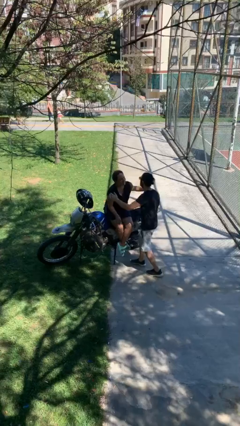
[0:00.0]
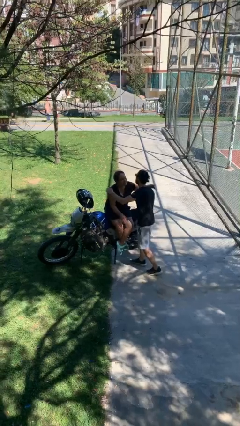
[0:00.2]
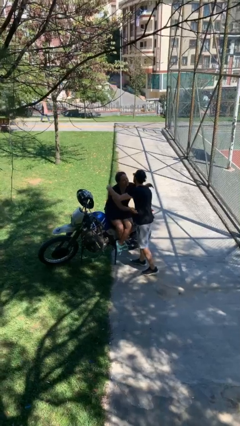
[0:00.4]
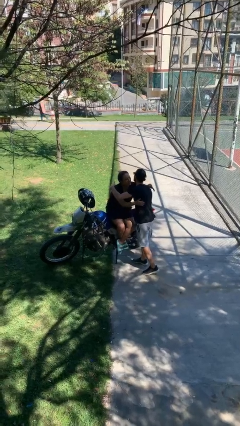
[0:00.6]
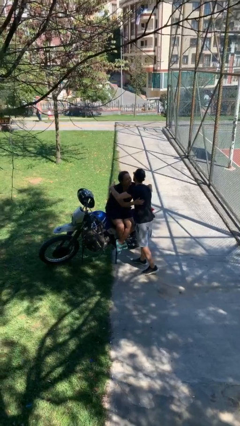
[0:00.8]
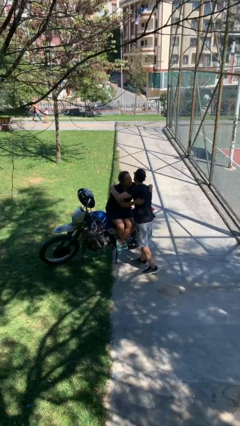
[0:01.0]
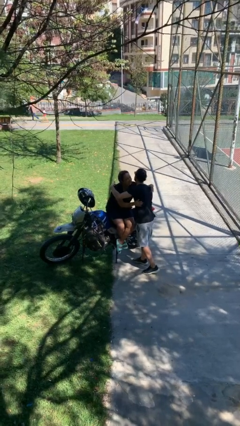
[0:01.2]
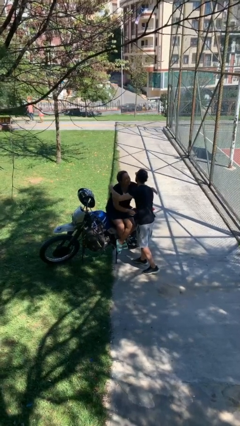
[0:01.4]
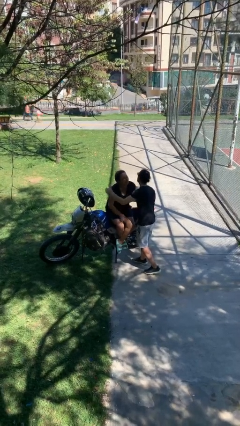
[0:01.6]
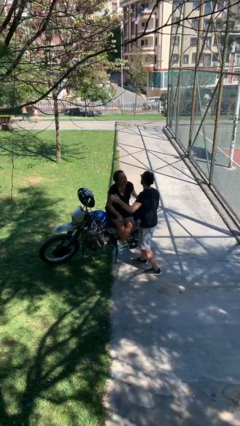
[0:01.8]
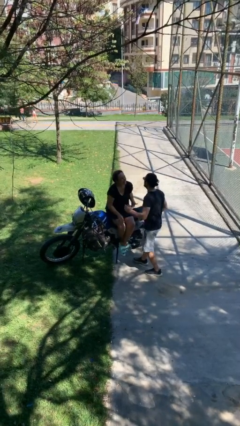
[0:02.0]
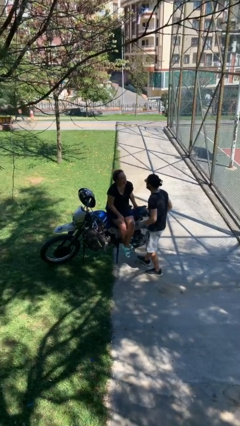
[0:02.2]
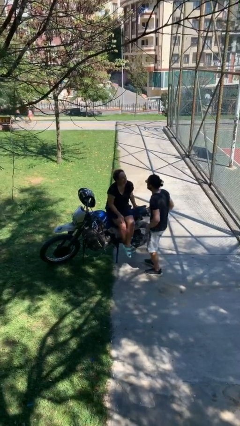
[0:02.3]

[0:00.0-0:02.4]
person embraces person

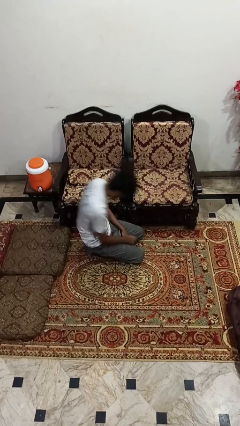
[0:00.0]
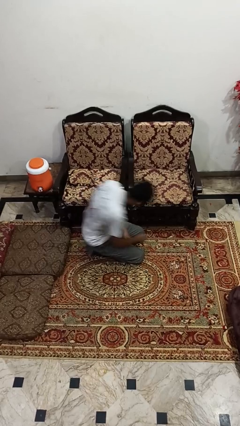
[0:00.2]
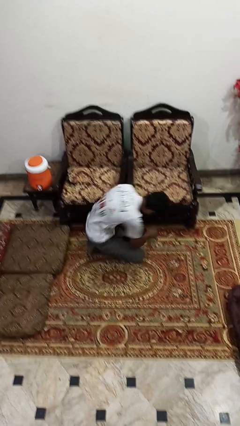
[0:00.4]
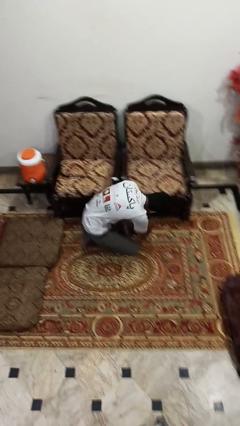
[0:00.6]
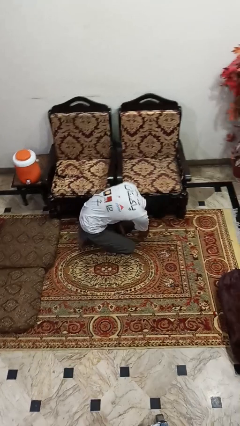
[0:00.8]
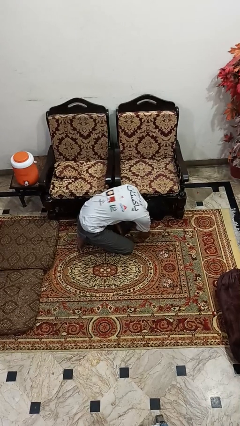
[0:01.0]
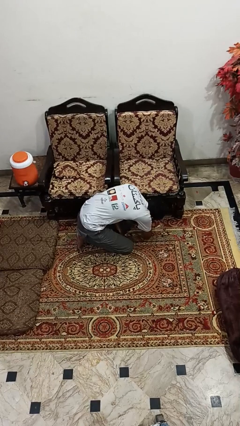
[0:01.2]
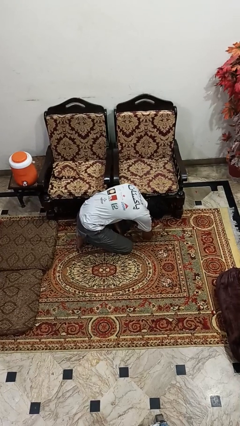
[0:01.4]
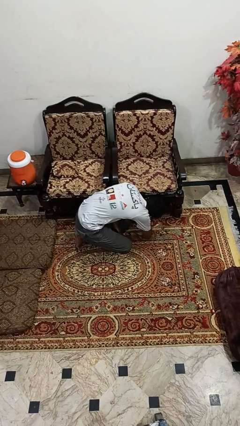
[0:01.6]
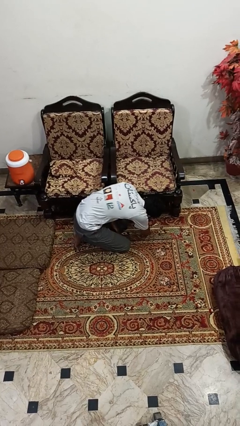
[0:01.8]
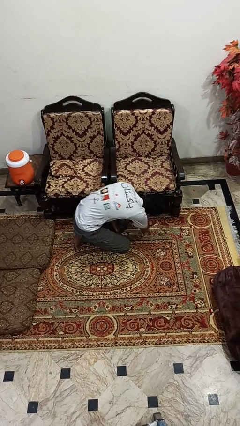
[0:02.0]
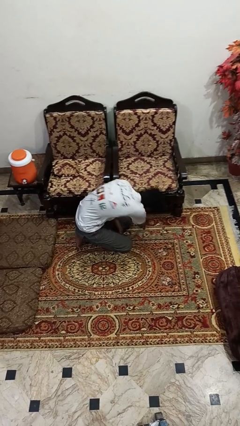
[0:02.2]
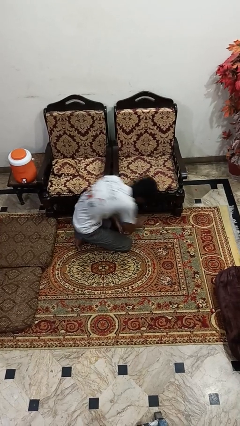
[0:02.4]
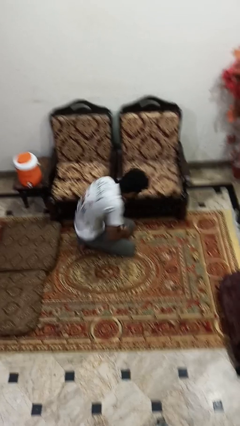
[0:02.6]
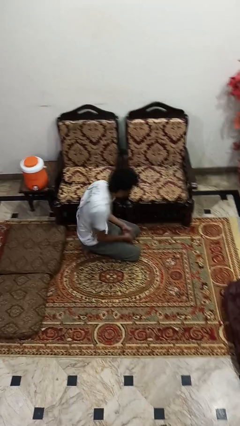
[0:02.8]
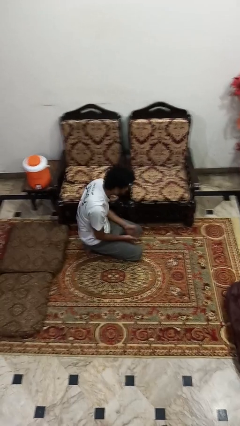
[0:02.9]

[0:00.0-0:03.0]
person searches under couch

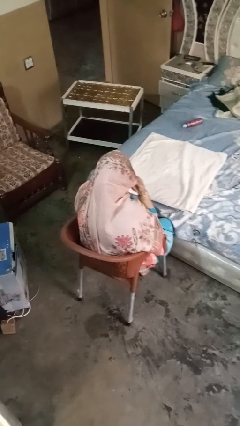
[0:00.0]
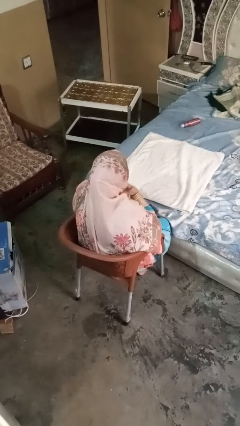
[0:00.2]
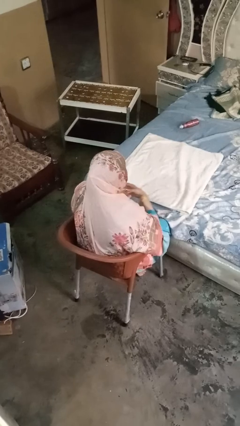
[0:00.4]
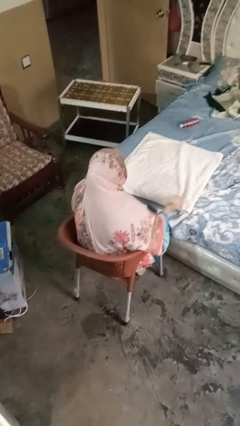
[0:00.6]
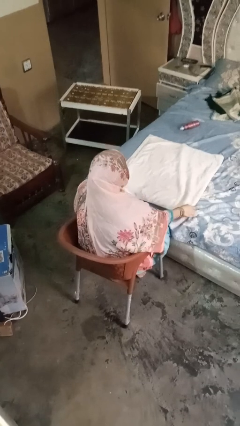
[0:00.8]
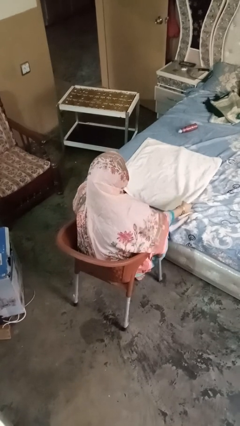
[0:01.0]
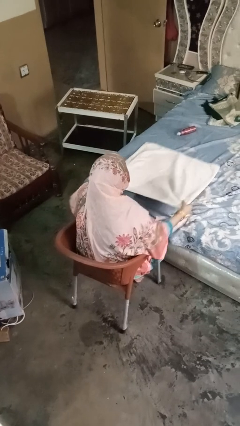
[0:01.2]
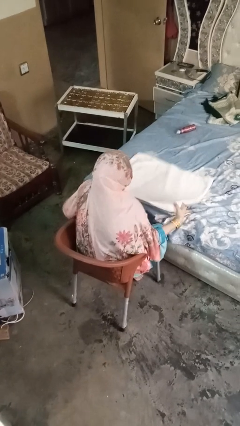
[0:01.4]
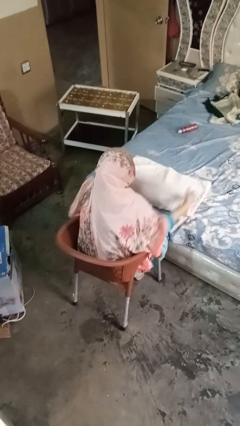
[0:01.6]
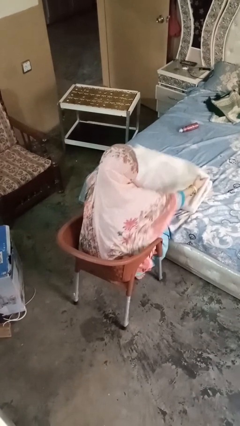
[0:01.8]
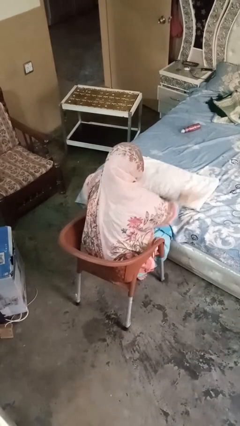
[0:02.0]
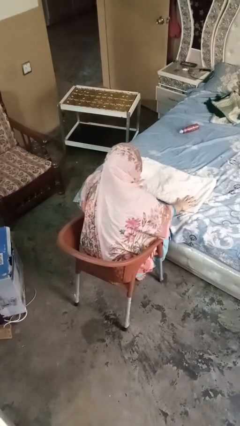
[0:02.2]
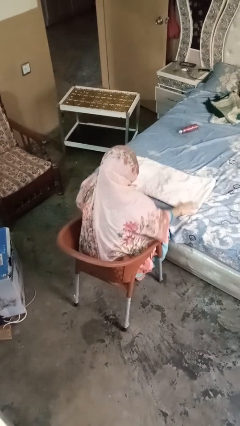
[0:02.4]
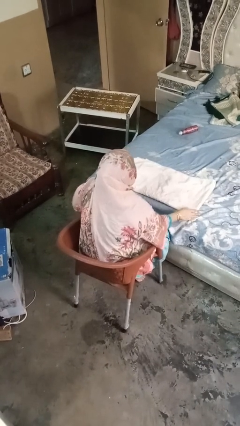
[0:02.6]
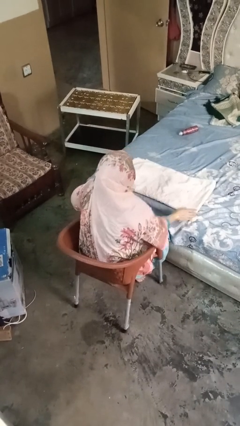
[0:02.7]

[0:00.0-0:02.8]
person folds towel

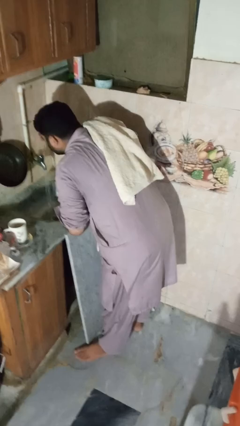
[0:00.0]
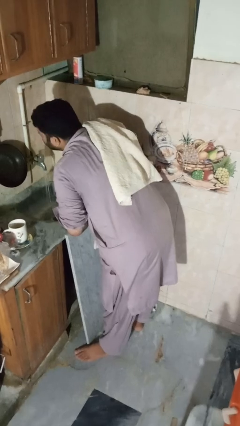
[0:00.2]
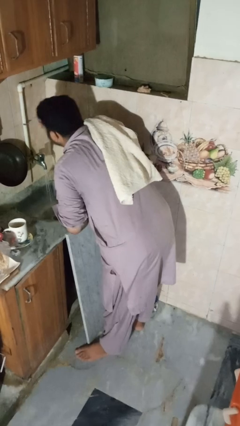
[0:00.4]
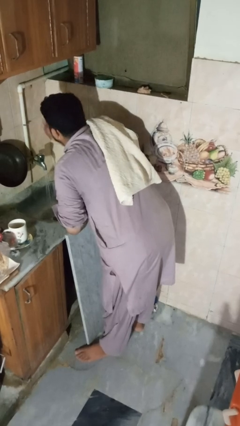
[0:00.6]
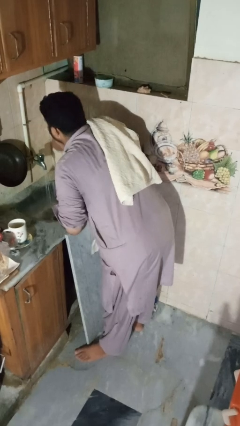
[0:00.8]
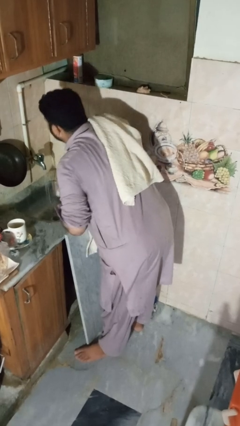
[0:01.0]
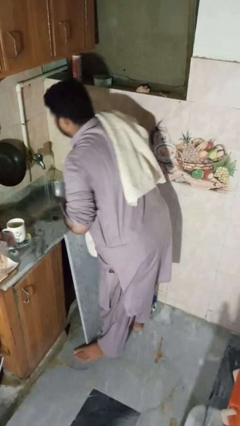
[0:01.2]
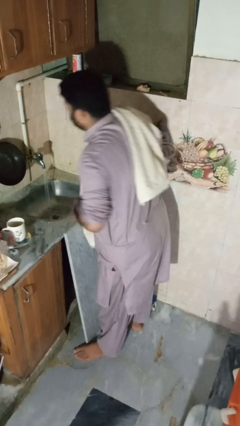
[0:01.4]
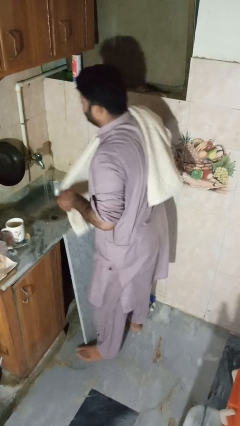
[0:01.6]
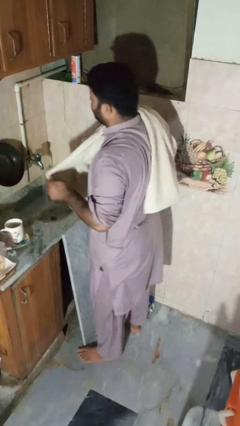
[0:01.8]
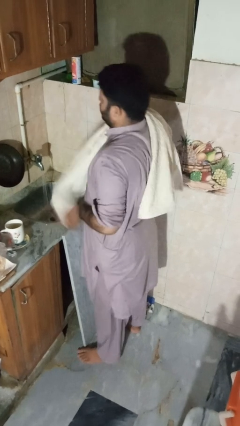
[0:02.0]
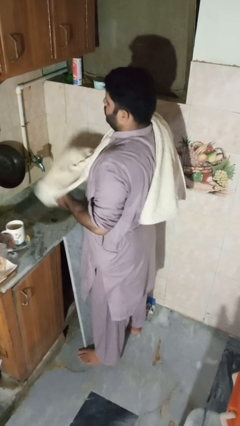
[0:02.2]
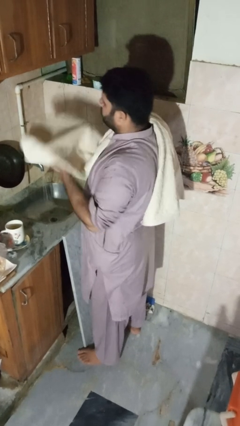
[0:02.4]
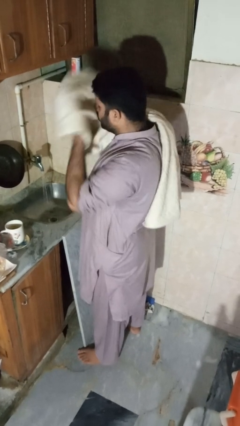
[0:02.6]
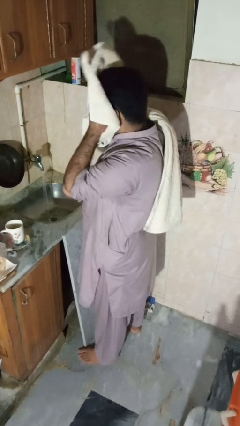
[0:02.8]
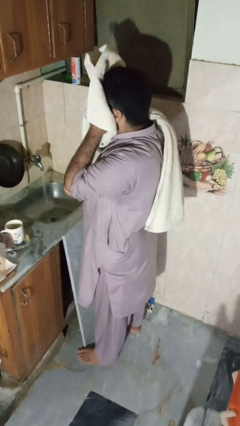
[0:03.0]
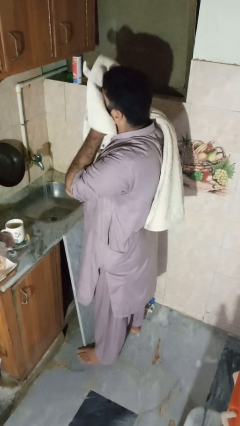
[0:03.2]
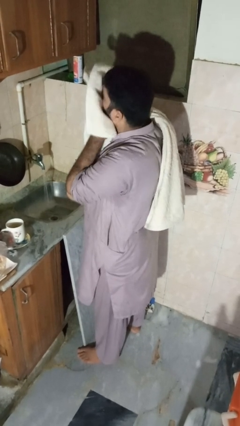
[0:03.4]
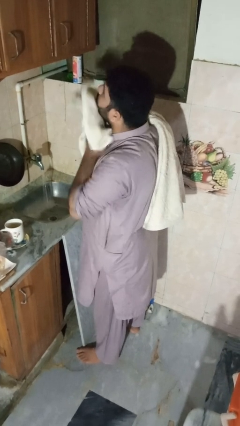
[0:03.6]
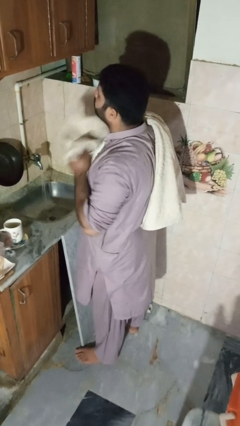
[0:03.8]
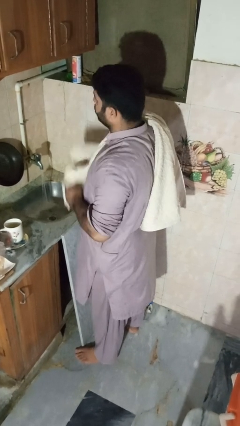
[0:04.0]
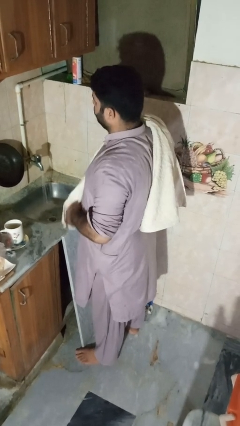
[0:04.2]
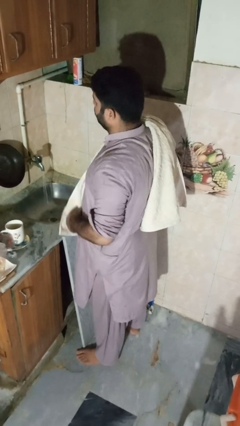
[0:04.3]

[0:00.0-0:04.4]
person dries face with towel

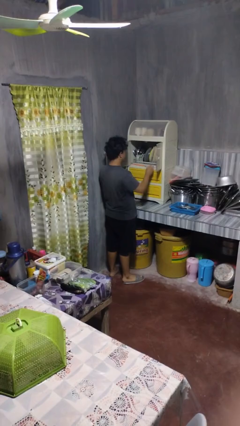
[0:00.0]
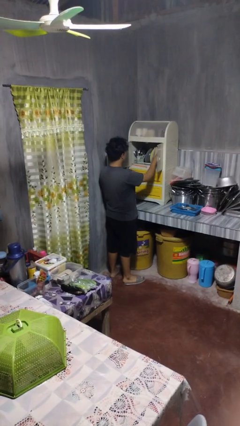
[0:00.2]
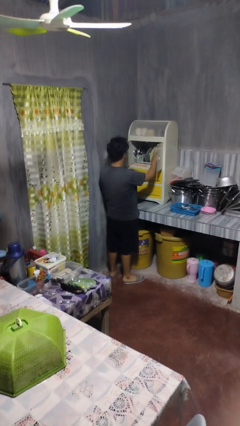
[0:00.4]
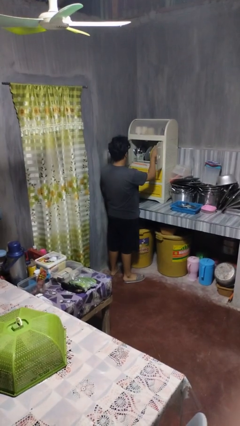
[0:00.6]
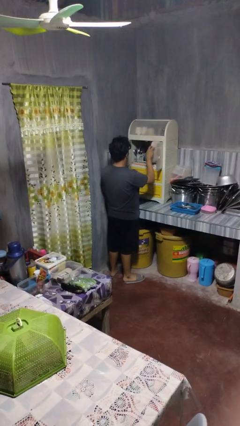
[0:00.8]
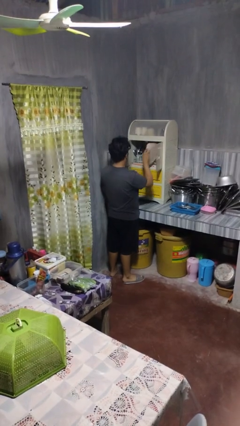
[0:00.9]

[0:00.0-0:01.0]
person picks up object from cabinet

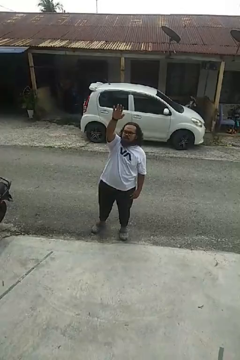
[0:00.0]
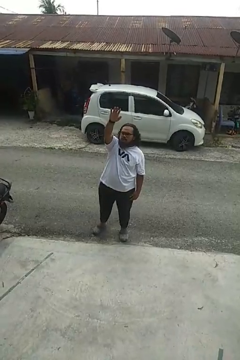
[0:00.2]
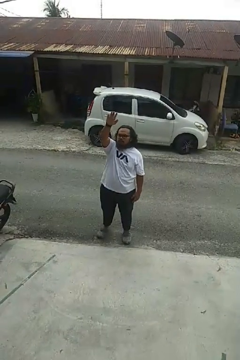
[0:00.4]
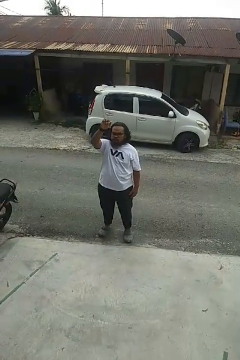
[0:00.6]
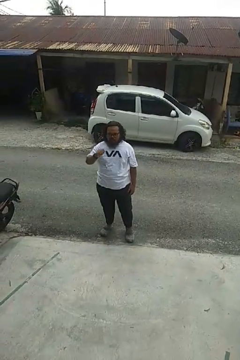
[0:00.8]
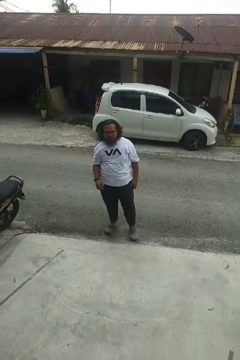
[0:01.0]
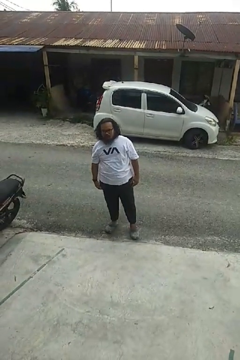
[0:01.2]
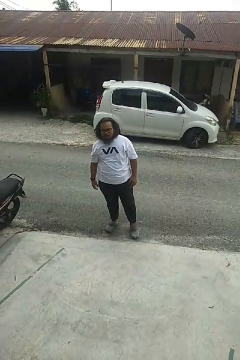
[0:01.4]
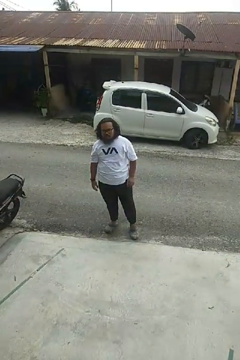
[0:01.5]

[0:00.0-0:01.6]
person gestures lower hand

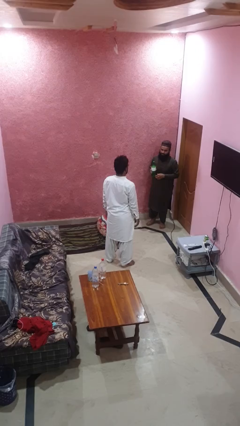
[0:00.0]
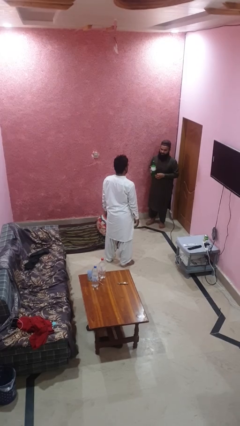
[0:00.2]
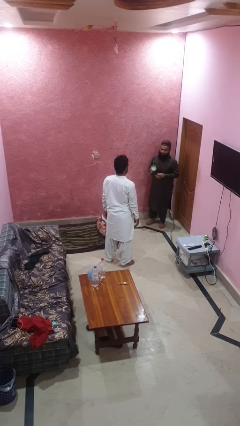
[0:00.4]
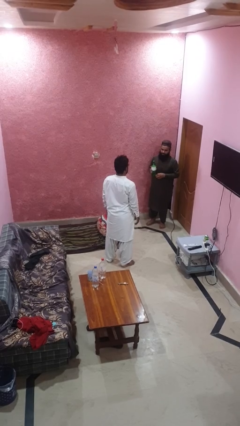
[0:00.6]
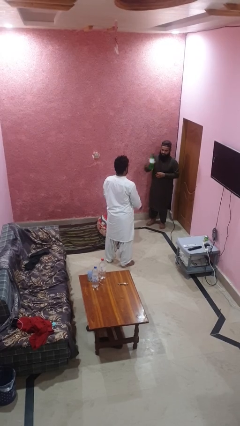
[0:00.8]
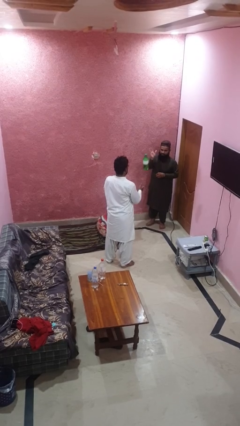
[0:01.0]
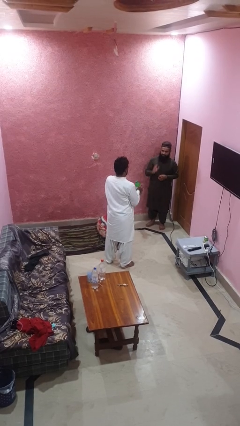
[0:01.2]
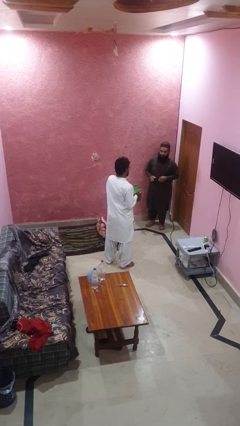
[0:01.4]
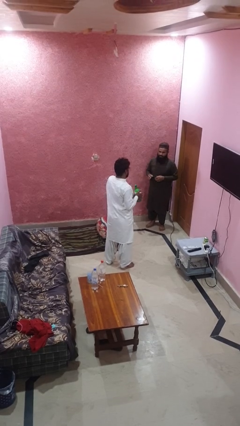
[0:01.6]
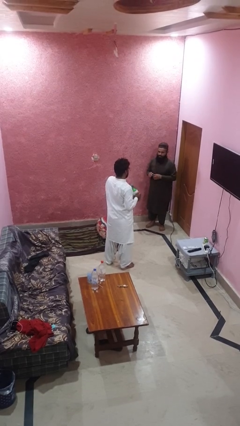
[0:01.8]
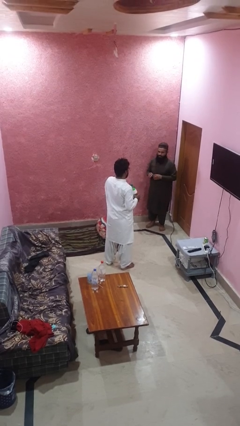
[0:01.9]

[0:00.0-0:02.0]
person catches object from person

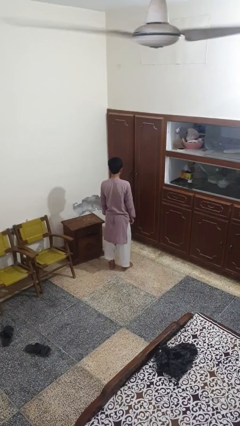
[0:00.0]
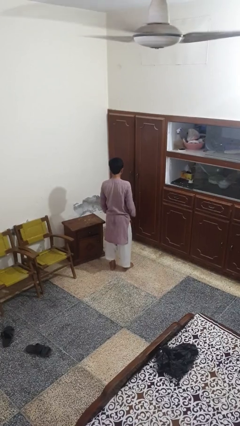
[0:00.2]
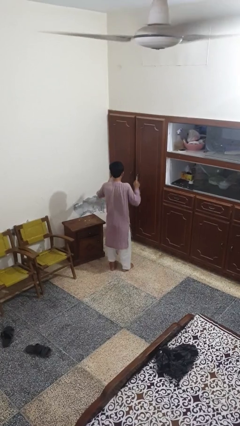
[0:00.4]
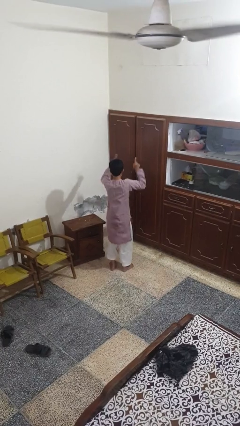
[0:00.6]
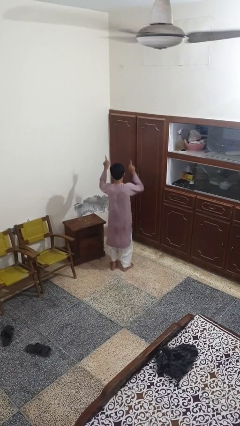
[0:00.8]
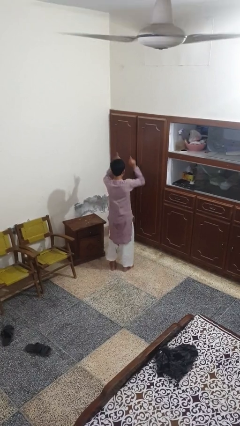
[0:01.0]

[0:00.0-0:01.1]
person dances in place
